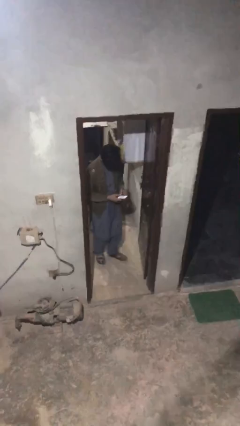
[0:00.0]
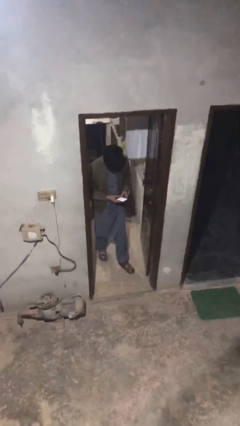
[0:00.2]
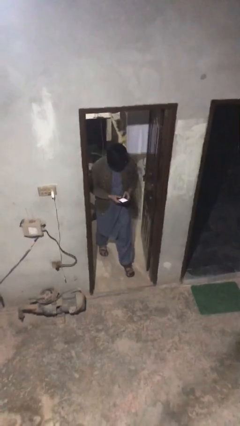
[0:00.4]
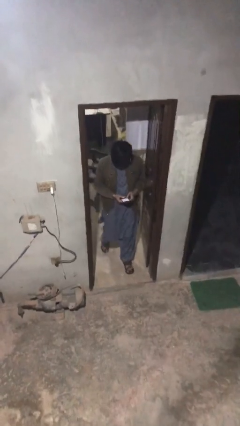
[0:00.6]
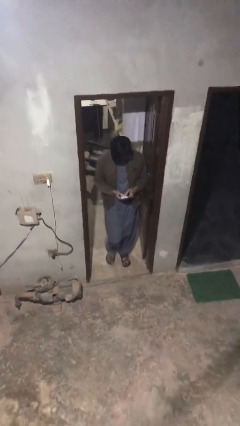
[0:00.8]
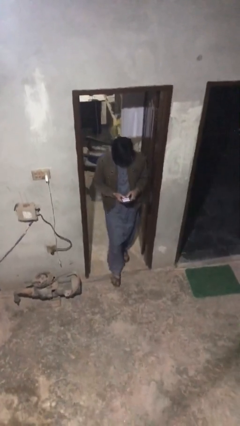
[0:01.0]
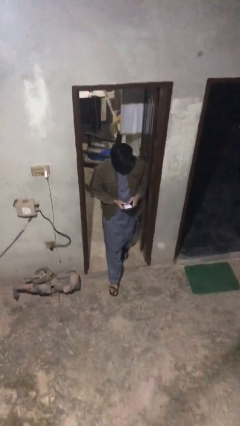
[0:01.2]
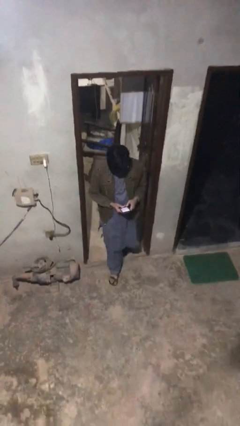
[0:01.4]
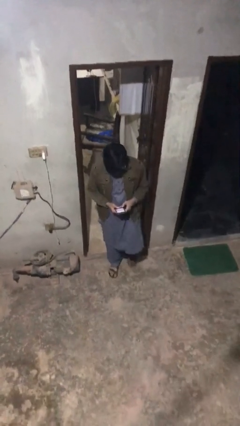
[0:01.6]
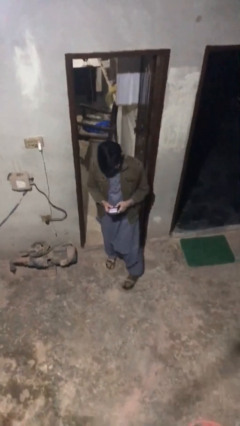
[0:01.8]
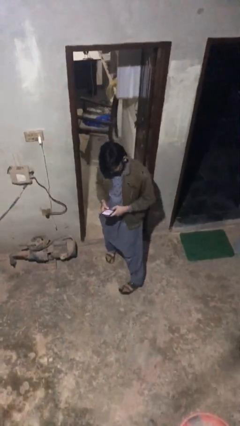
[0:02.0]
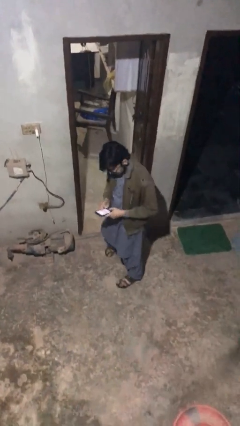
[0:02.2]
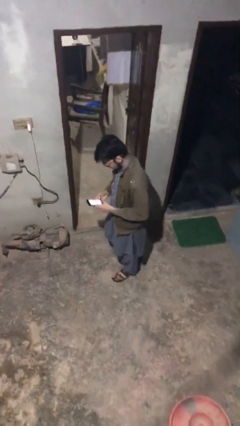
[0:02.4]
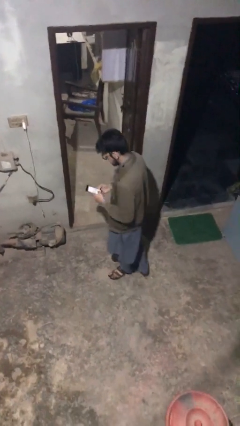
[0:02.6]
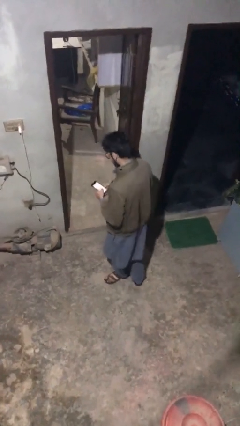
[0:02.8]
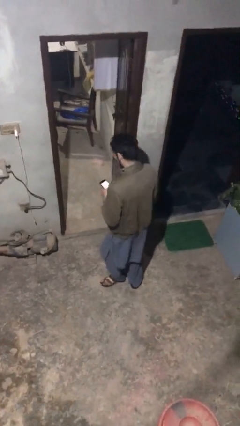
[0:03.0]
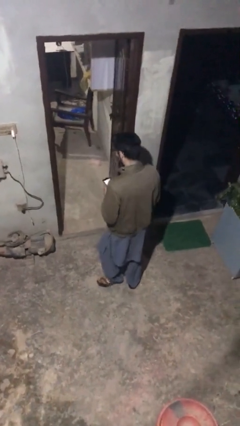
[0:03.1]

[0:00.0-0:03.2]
person exits scene through structure

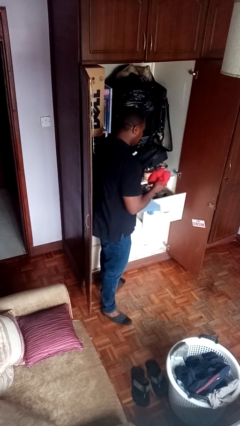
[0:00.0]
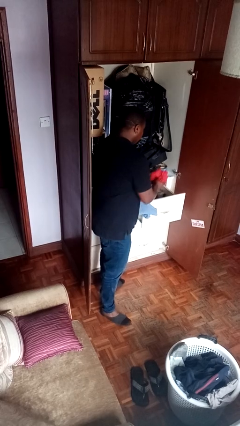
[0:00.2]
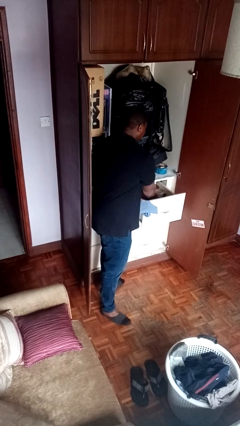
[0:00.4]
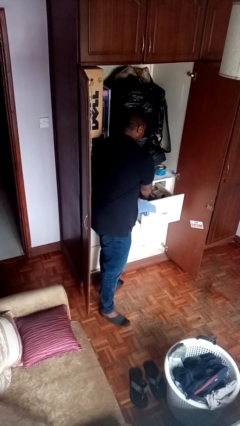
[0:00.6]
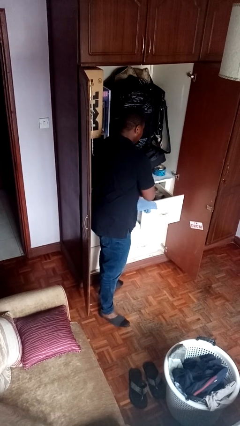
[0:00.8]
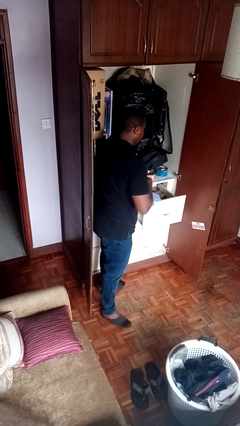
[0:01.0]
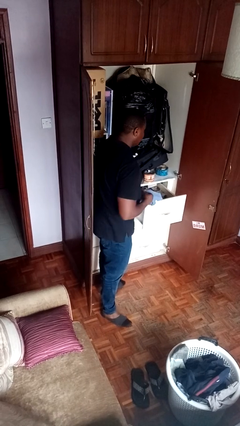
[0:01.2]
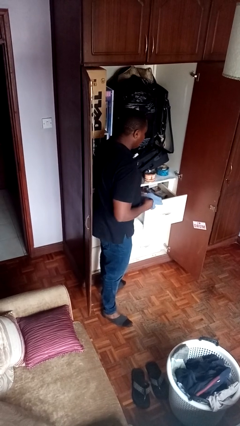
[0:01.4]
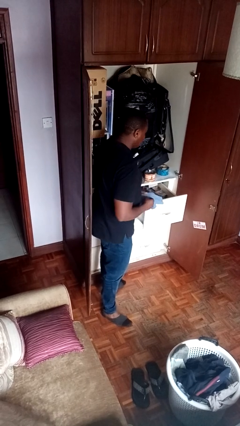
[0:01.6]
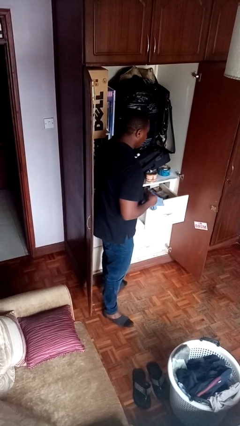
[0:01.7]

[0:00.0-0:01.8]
person puts clothes into dresser

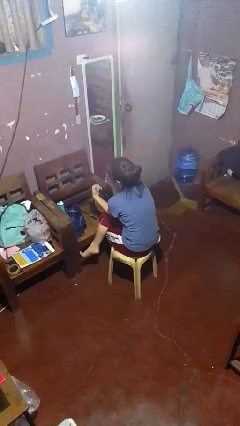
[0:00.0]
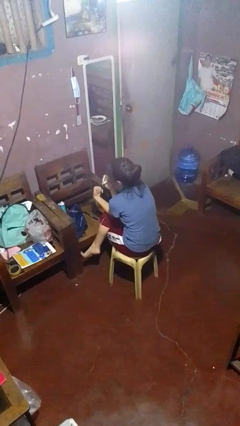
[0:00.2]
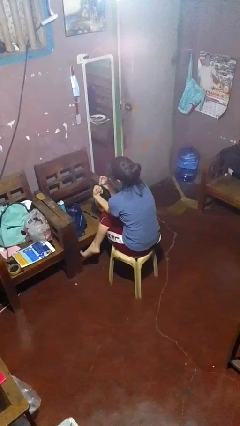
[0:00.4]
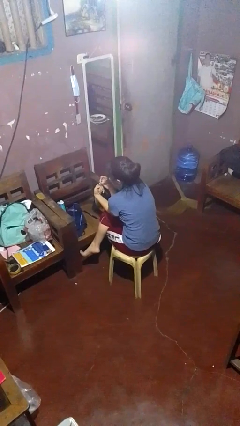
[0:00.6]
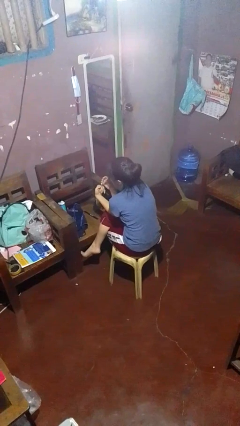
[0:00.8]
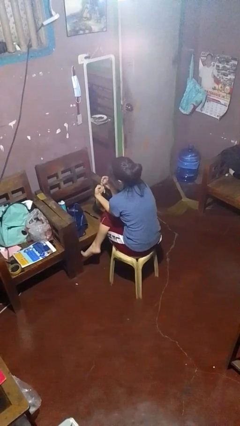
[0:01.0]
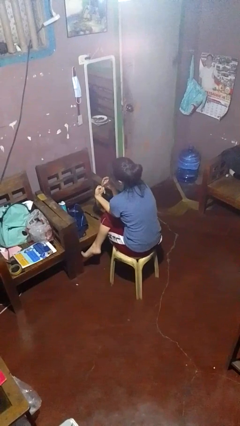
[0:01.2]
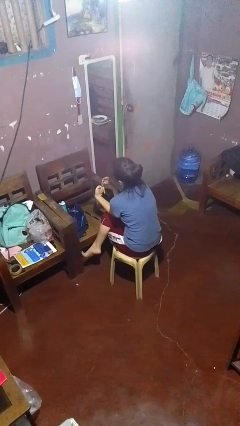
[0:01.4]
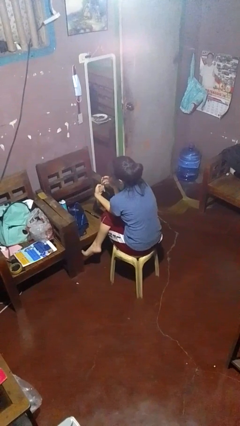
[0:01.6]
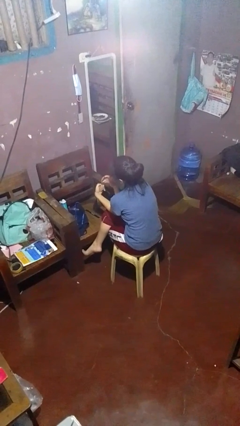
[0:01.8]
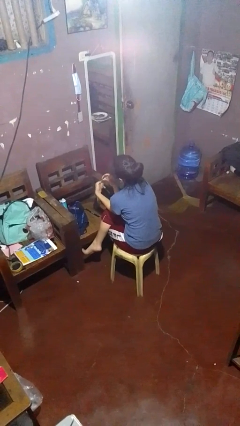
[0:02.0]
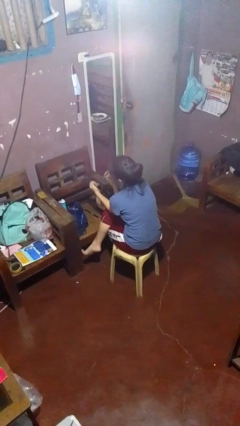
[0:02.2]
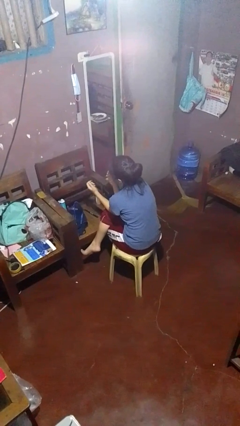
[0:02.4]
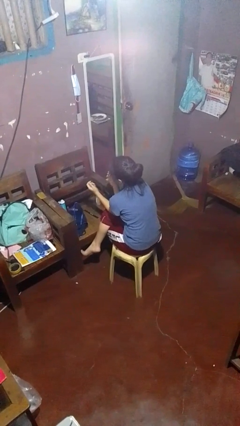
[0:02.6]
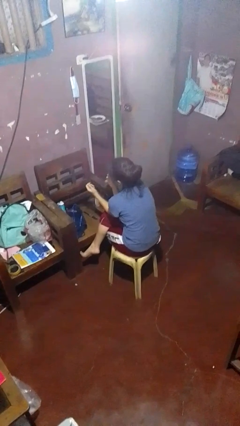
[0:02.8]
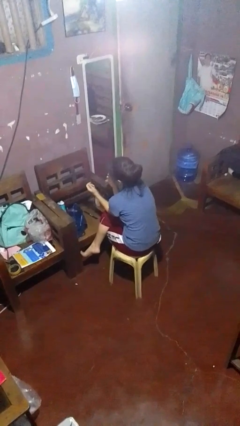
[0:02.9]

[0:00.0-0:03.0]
person clips fingernails

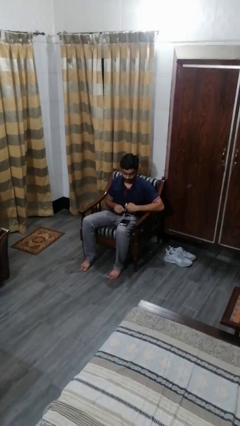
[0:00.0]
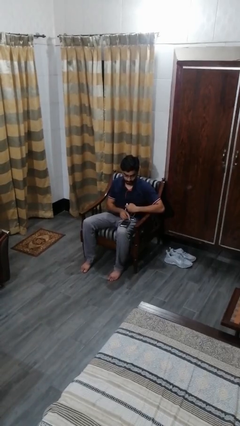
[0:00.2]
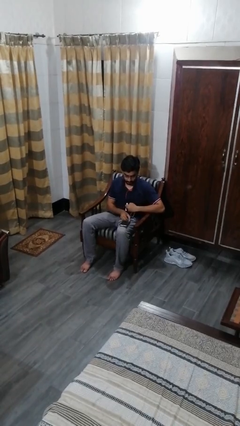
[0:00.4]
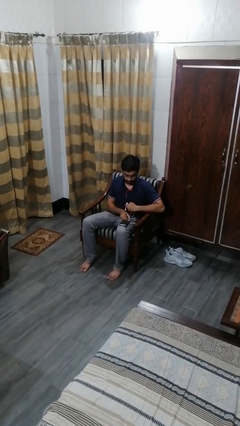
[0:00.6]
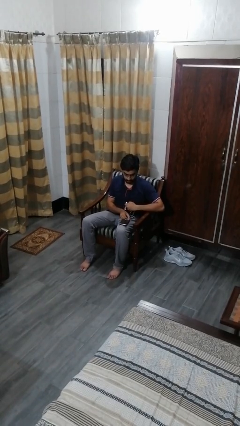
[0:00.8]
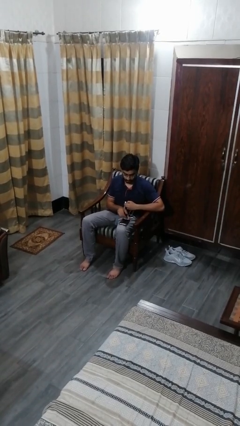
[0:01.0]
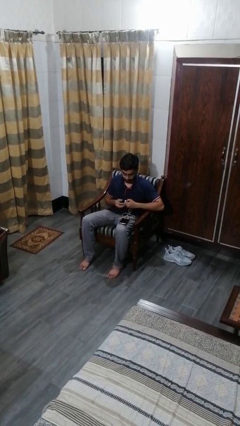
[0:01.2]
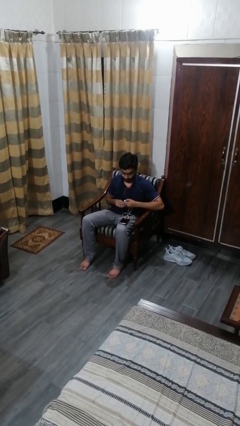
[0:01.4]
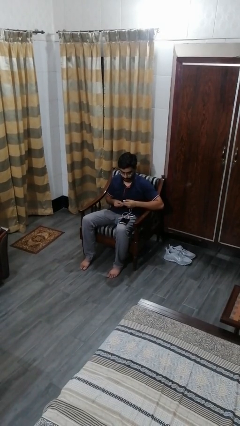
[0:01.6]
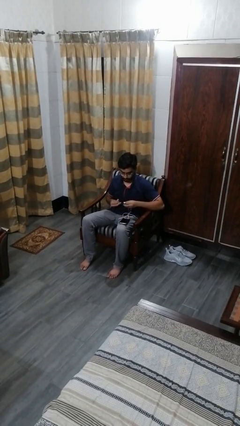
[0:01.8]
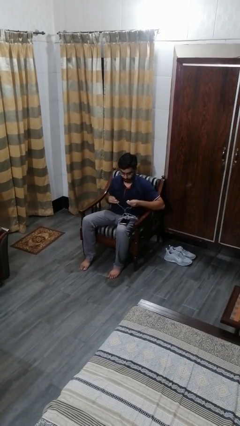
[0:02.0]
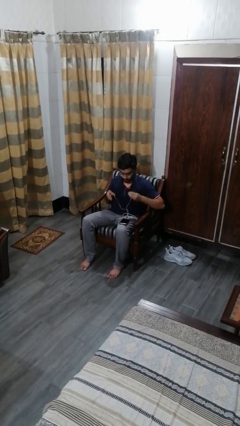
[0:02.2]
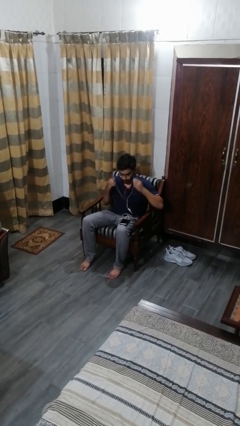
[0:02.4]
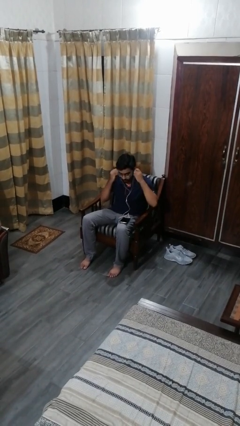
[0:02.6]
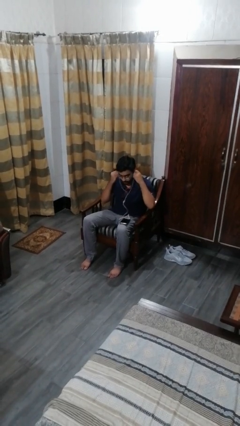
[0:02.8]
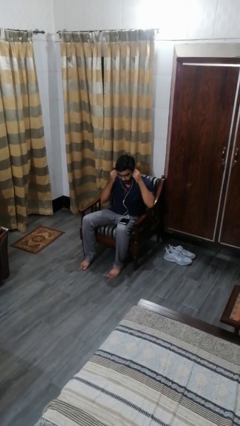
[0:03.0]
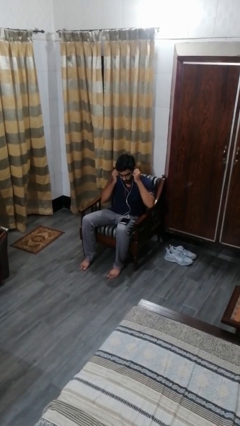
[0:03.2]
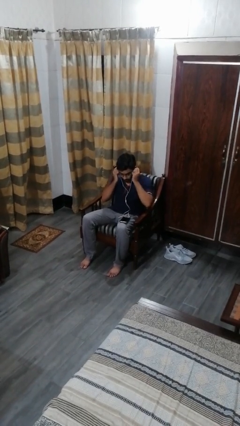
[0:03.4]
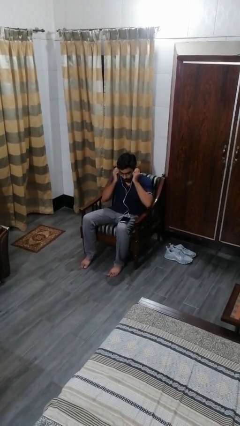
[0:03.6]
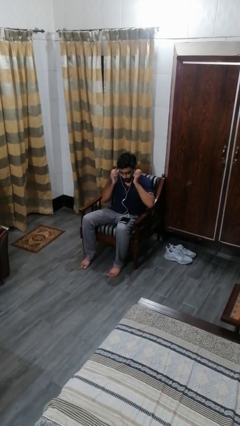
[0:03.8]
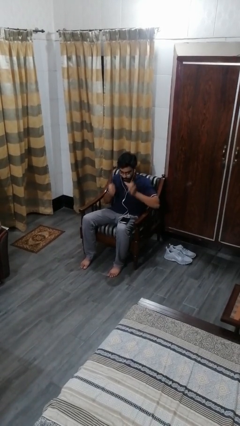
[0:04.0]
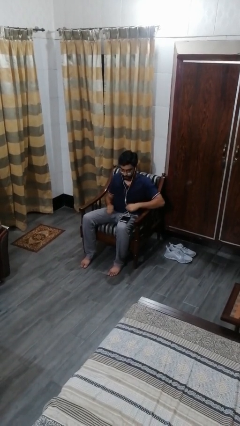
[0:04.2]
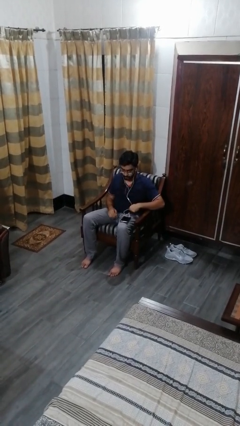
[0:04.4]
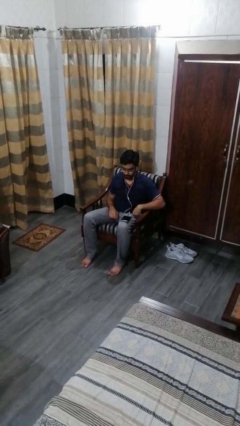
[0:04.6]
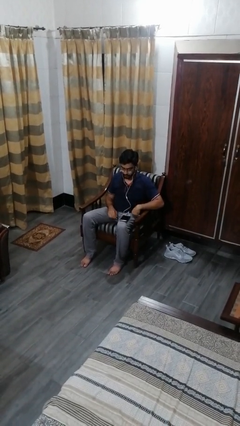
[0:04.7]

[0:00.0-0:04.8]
person puts on headphones

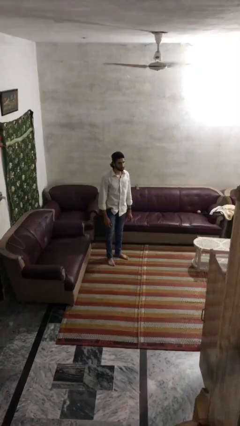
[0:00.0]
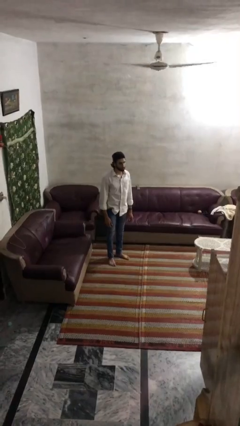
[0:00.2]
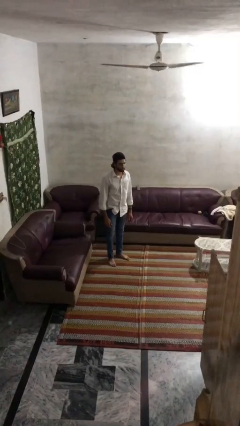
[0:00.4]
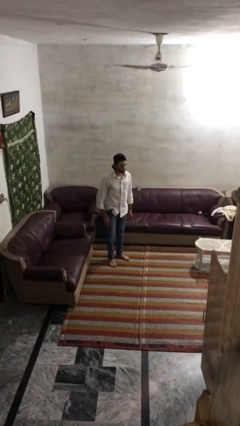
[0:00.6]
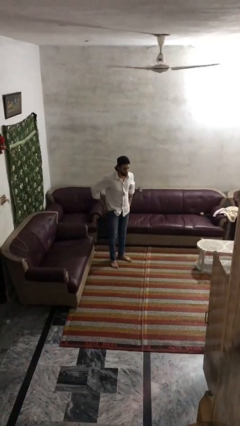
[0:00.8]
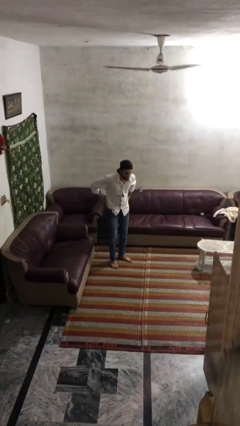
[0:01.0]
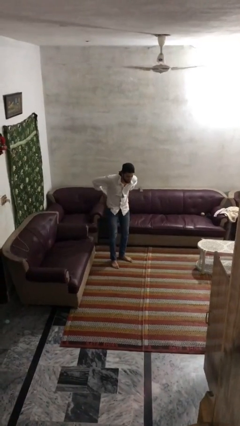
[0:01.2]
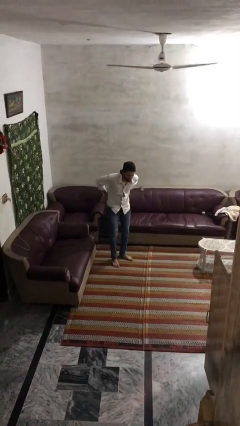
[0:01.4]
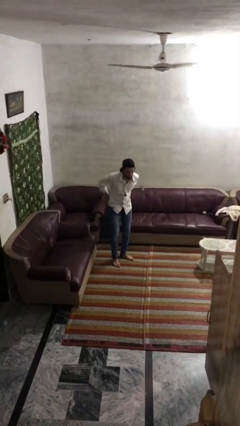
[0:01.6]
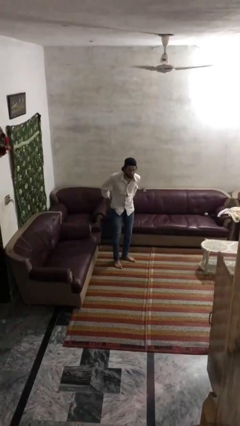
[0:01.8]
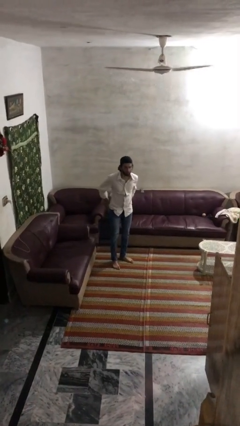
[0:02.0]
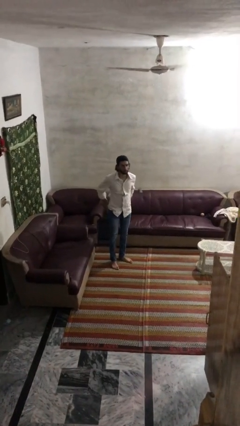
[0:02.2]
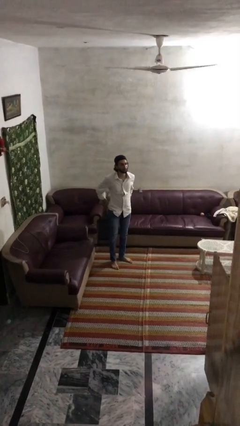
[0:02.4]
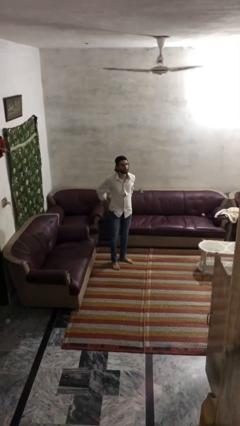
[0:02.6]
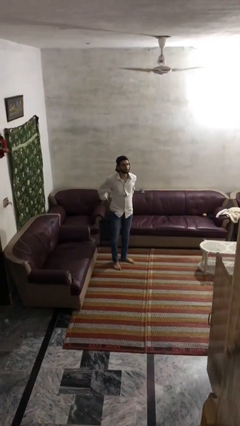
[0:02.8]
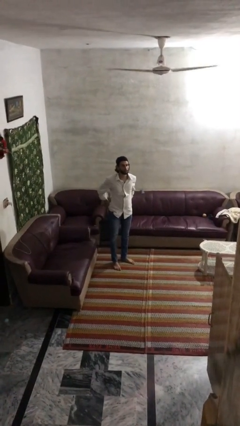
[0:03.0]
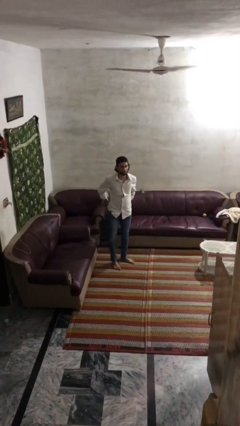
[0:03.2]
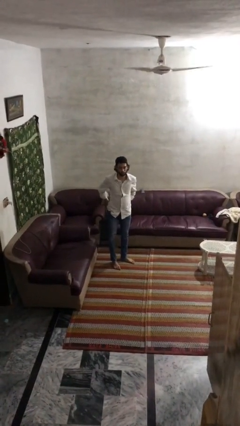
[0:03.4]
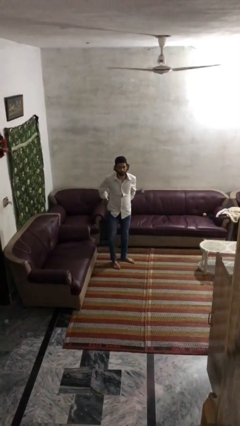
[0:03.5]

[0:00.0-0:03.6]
person puts hands in back pockets

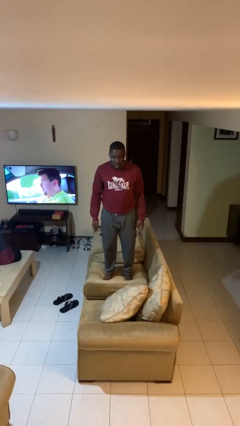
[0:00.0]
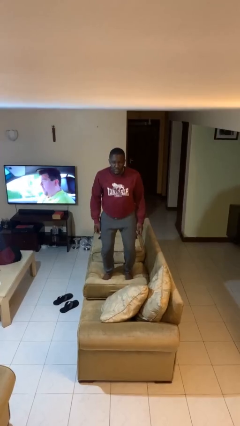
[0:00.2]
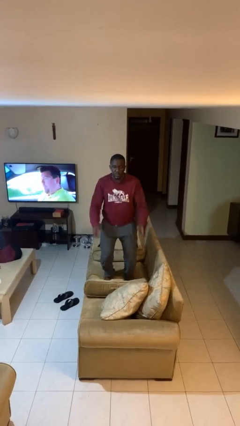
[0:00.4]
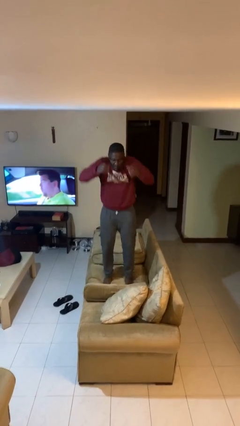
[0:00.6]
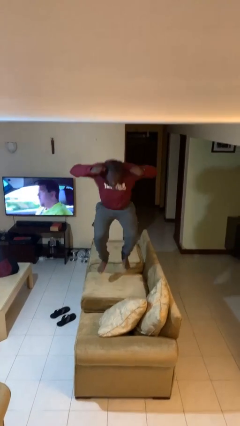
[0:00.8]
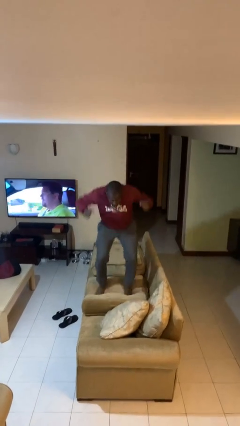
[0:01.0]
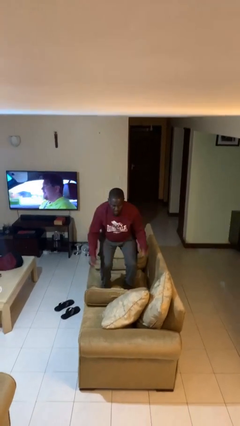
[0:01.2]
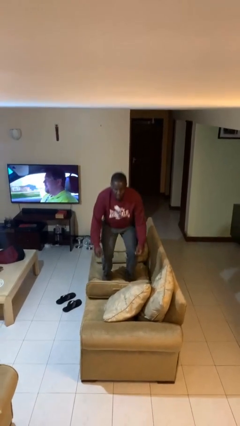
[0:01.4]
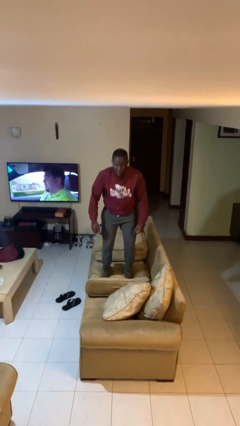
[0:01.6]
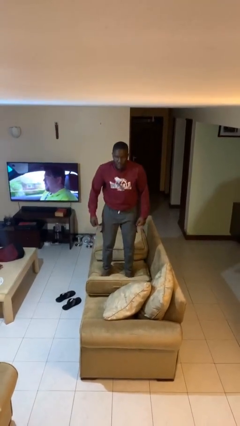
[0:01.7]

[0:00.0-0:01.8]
person jumps on couch
